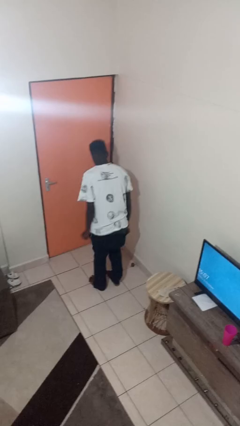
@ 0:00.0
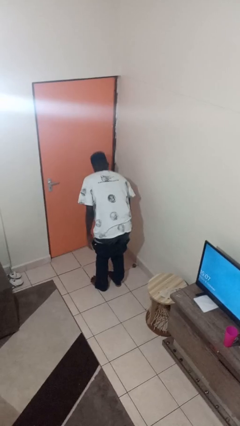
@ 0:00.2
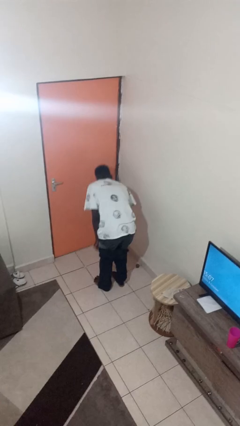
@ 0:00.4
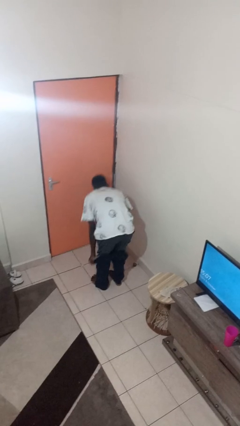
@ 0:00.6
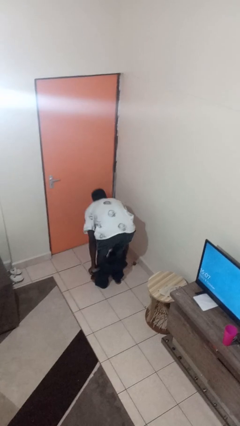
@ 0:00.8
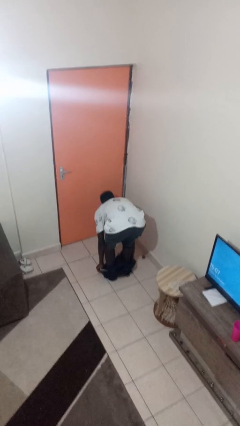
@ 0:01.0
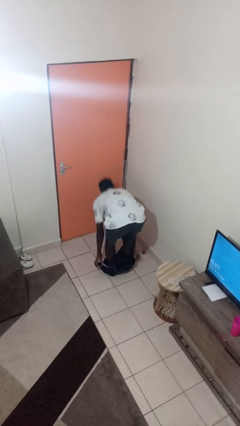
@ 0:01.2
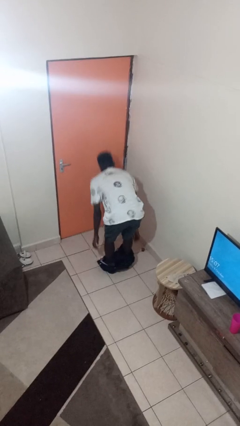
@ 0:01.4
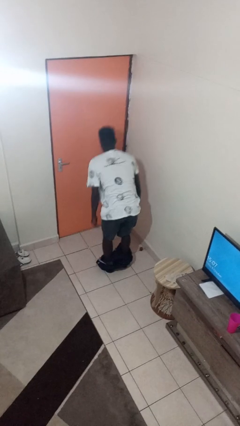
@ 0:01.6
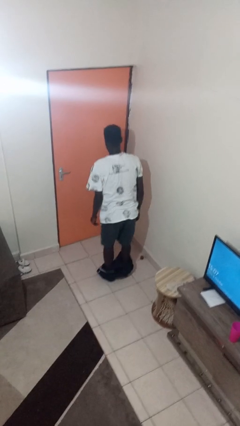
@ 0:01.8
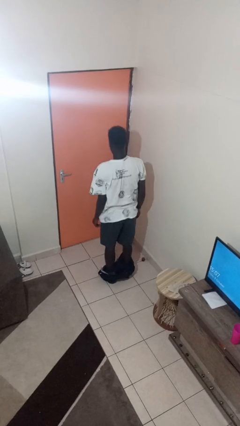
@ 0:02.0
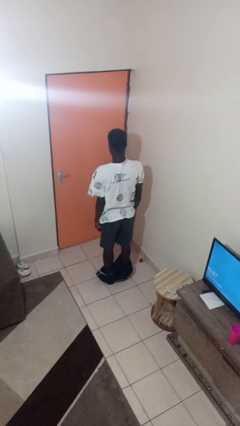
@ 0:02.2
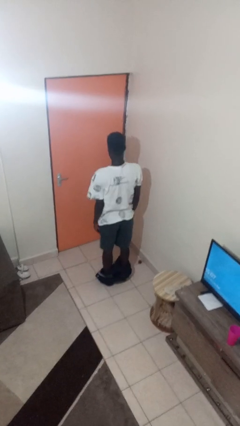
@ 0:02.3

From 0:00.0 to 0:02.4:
person takes off pants

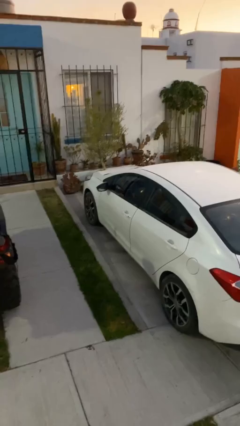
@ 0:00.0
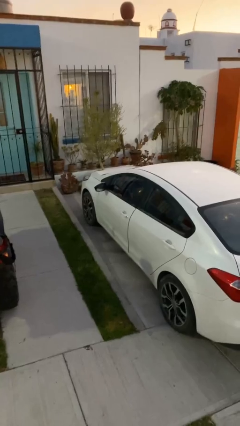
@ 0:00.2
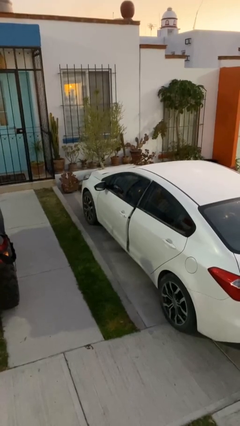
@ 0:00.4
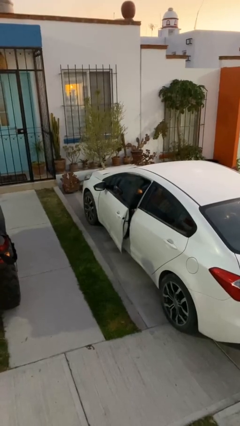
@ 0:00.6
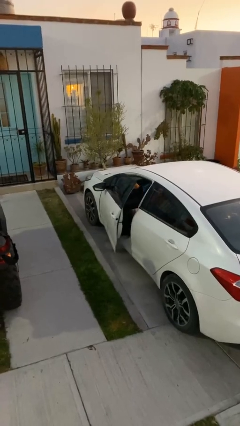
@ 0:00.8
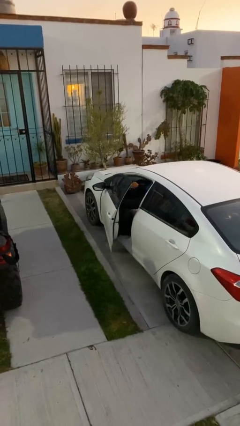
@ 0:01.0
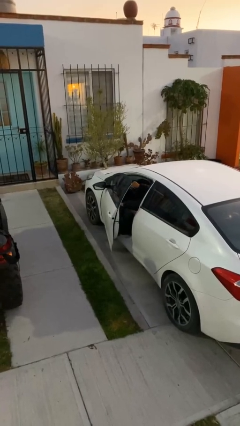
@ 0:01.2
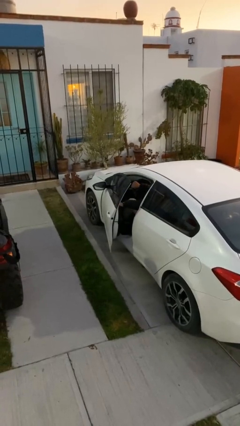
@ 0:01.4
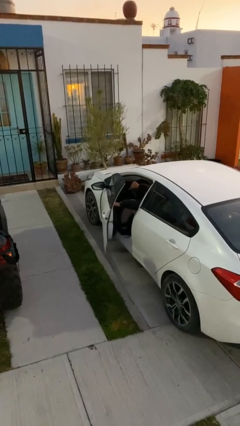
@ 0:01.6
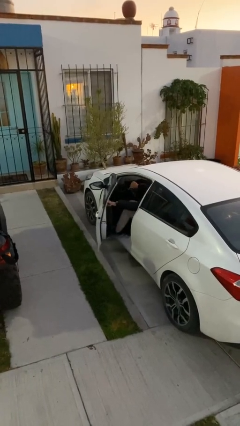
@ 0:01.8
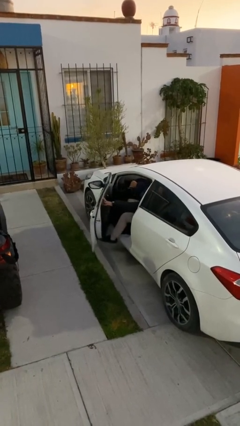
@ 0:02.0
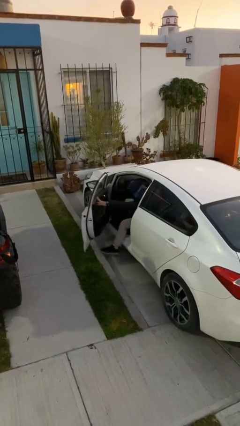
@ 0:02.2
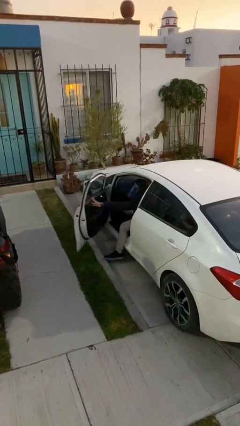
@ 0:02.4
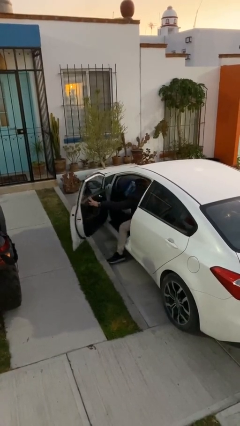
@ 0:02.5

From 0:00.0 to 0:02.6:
person opens car door

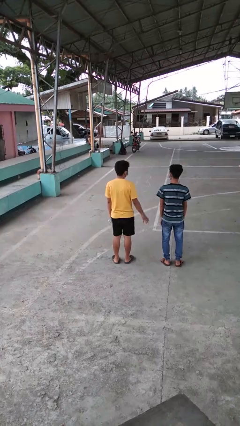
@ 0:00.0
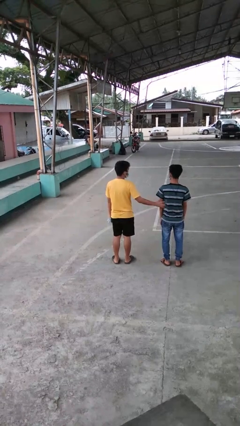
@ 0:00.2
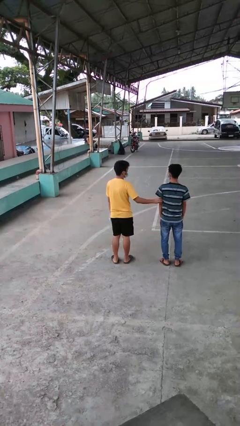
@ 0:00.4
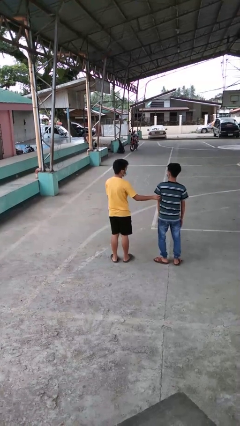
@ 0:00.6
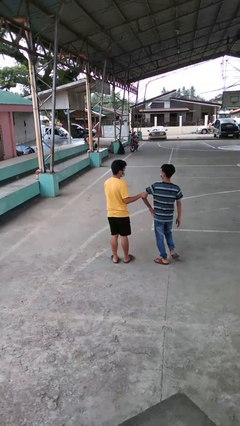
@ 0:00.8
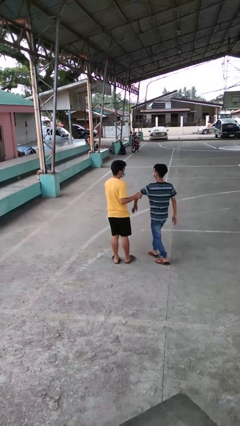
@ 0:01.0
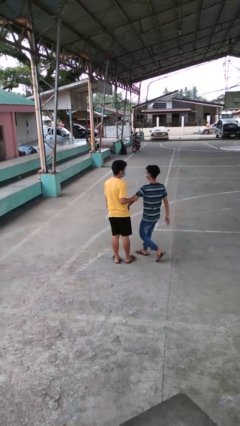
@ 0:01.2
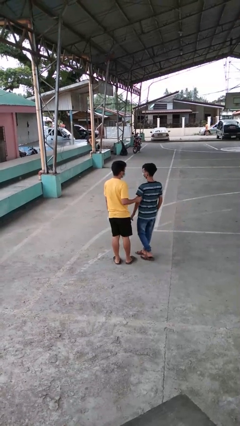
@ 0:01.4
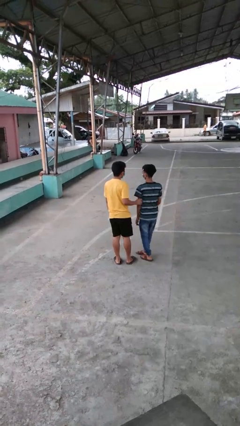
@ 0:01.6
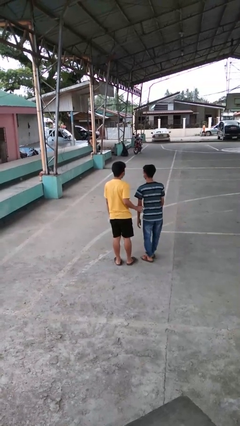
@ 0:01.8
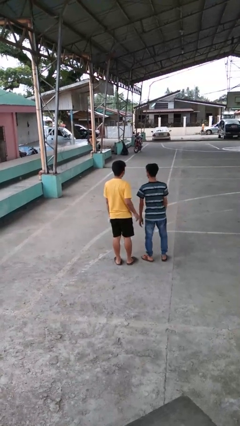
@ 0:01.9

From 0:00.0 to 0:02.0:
person grabs person by bicep

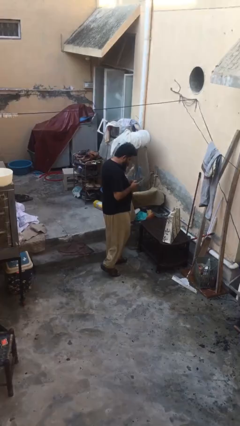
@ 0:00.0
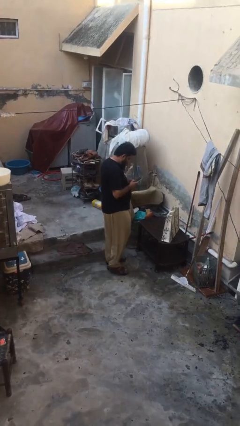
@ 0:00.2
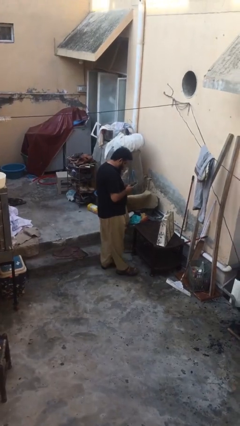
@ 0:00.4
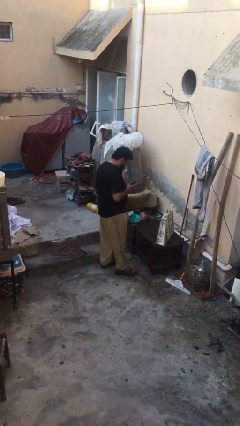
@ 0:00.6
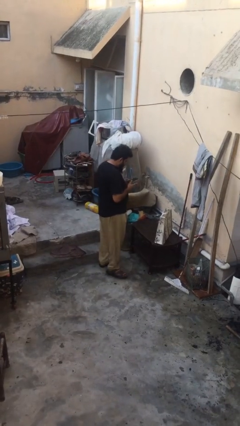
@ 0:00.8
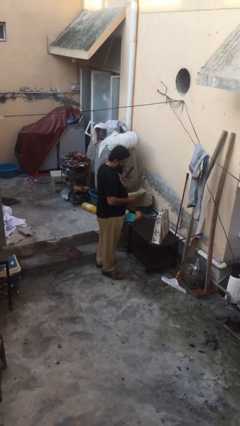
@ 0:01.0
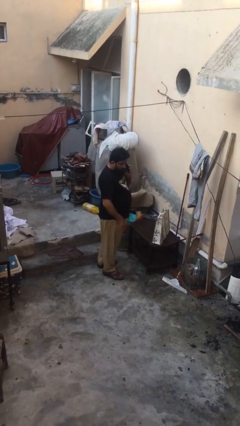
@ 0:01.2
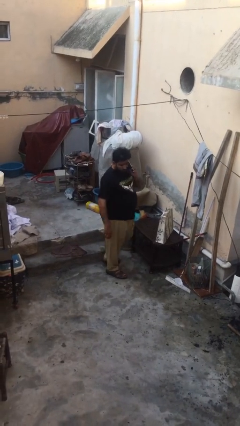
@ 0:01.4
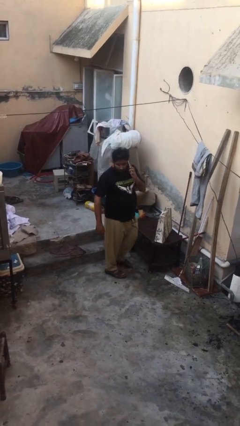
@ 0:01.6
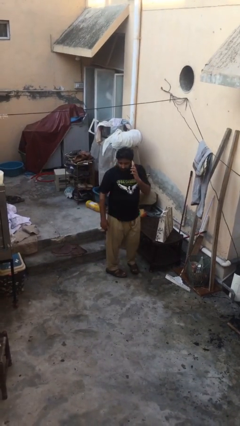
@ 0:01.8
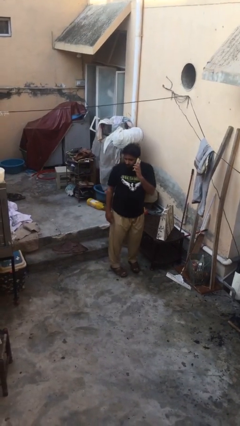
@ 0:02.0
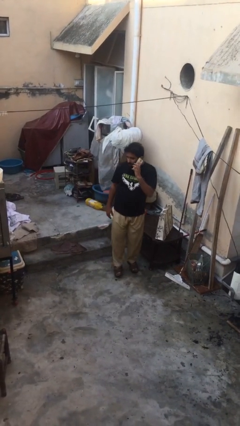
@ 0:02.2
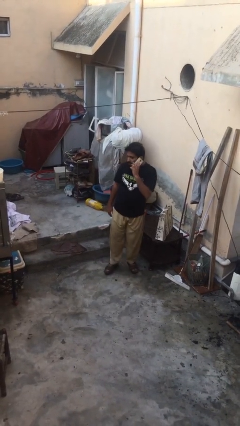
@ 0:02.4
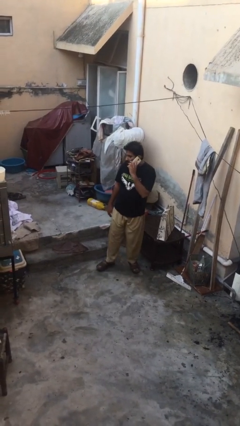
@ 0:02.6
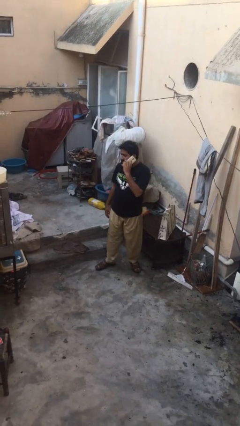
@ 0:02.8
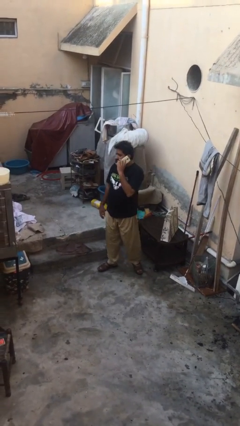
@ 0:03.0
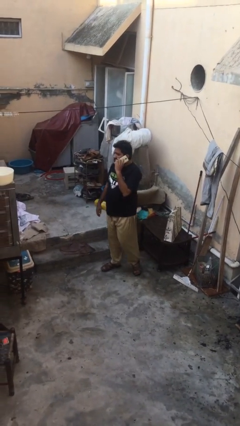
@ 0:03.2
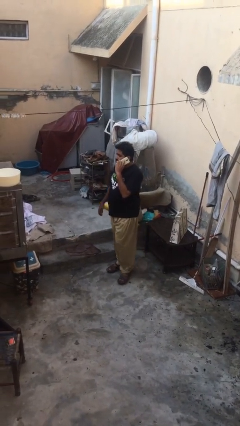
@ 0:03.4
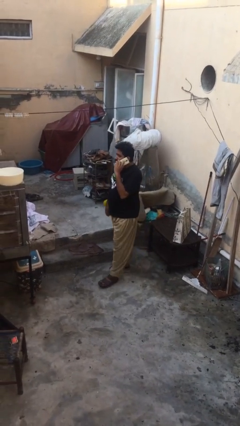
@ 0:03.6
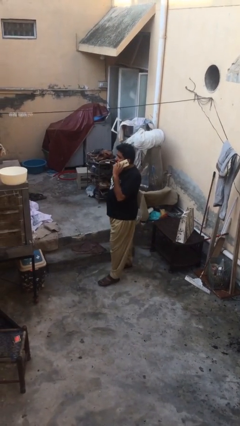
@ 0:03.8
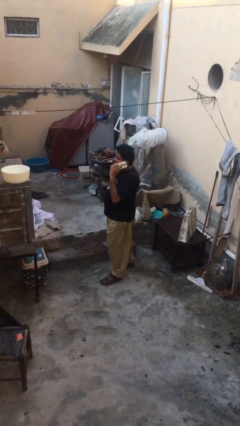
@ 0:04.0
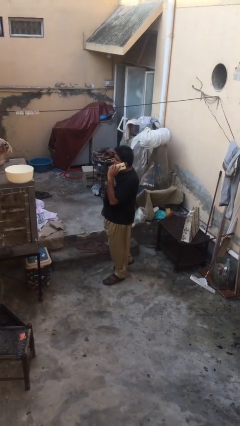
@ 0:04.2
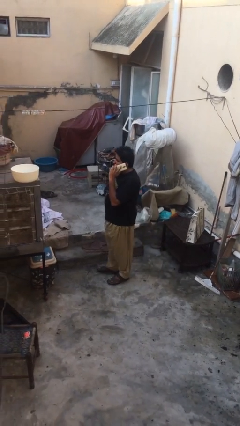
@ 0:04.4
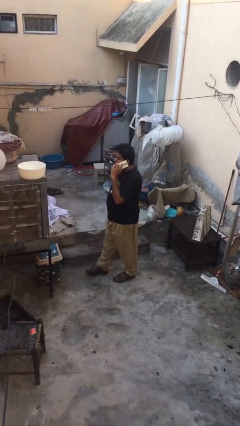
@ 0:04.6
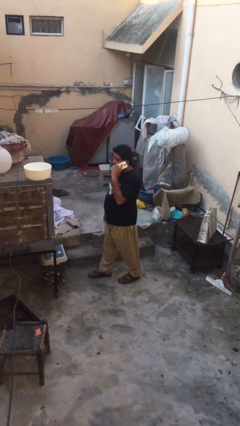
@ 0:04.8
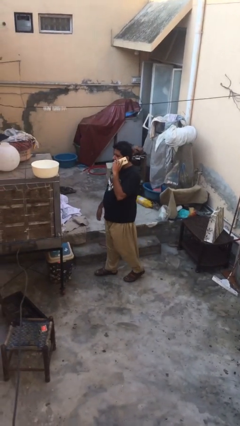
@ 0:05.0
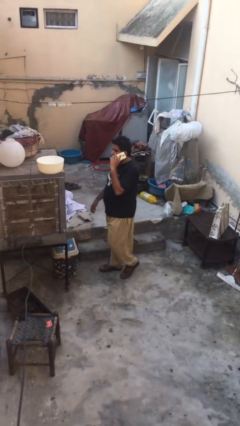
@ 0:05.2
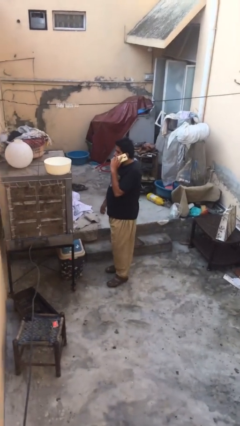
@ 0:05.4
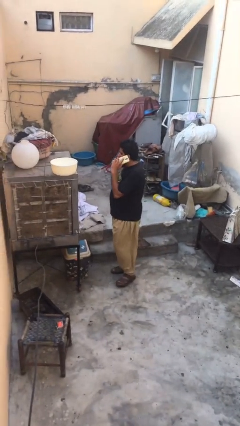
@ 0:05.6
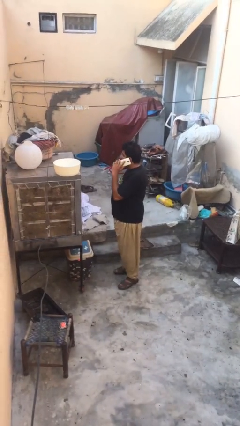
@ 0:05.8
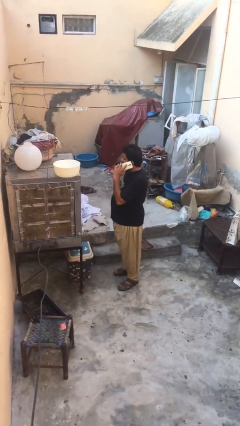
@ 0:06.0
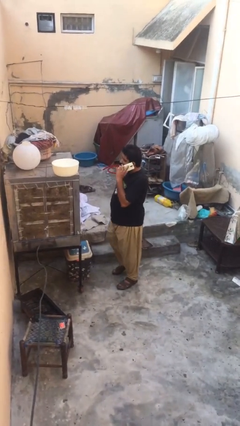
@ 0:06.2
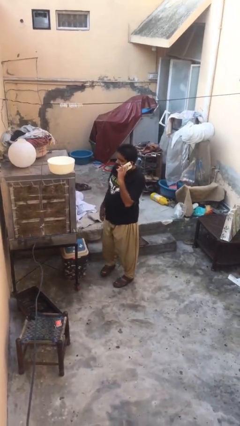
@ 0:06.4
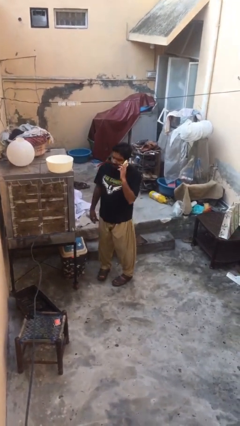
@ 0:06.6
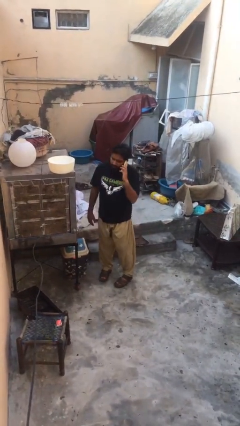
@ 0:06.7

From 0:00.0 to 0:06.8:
person talks on phone

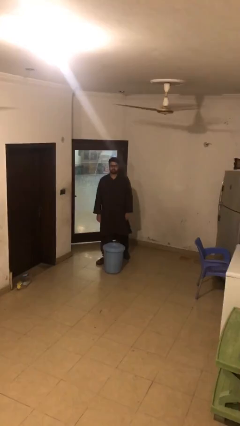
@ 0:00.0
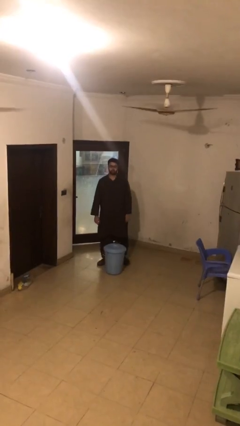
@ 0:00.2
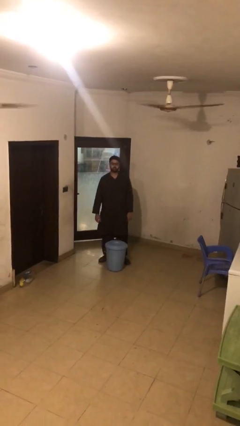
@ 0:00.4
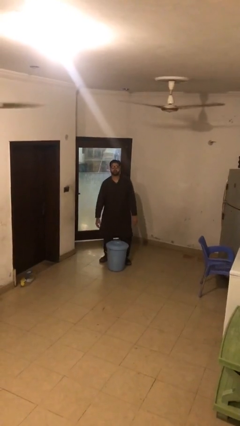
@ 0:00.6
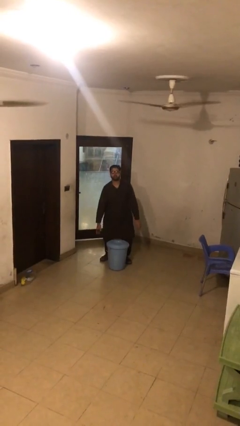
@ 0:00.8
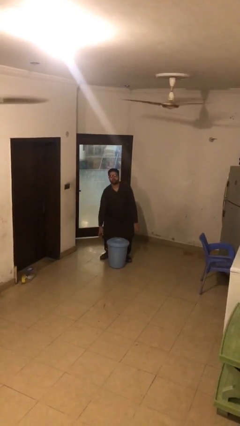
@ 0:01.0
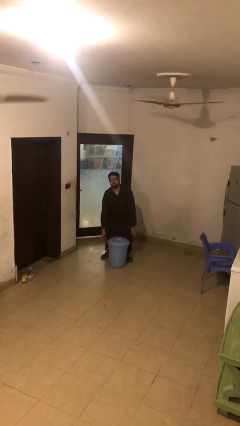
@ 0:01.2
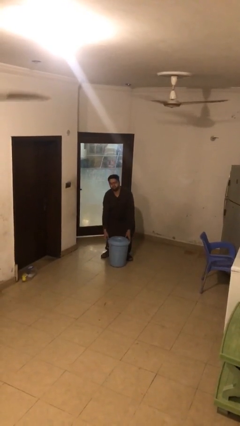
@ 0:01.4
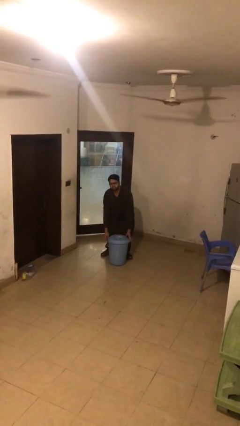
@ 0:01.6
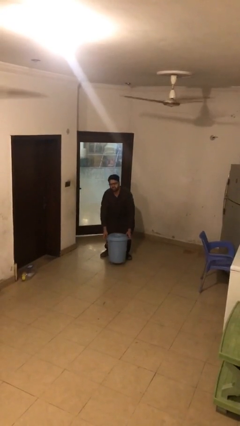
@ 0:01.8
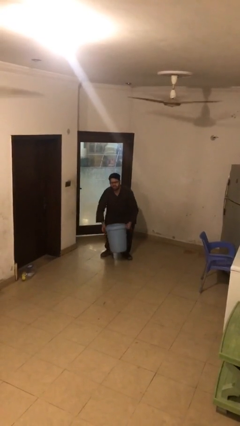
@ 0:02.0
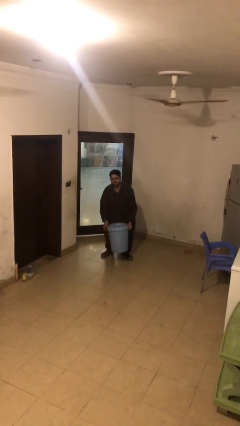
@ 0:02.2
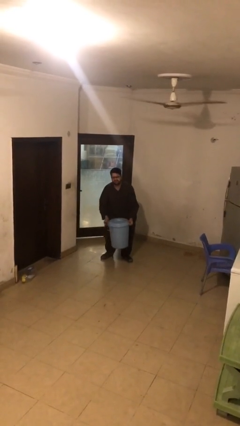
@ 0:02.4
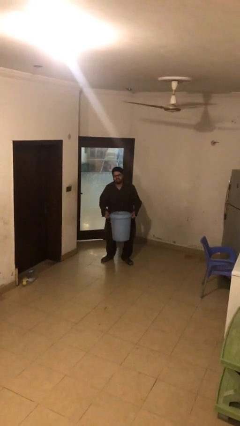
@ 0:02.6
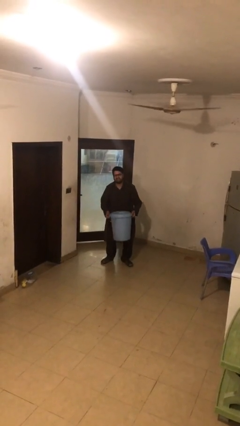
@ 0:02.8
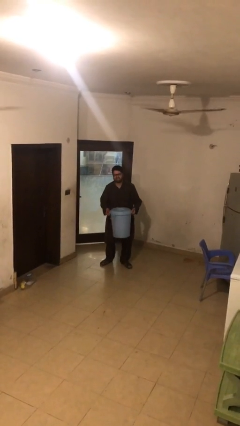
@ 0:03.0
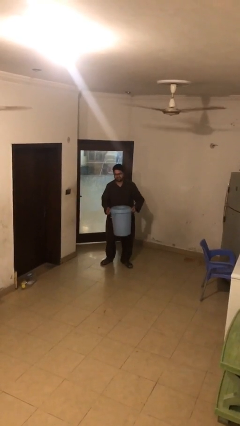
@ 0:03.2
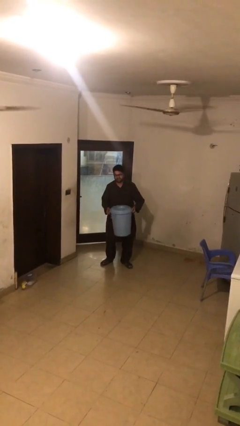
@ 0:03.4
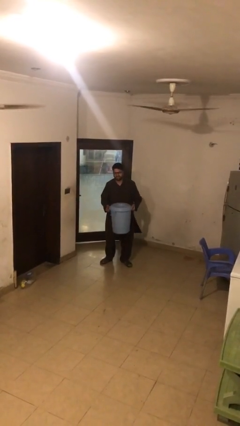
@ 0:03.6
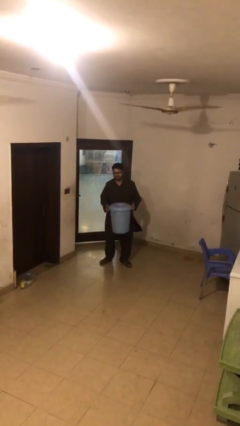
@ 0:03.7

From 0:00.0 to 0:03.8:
person picks up object from floor
